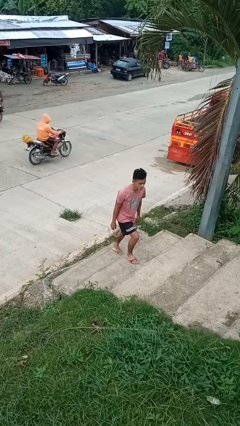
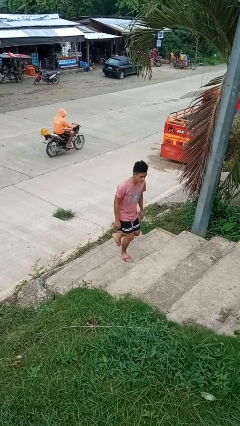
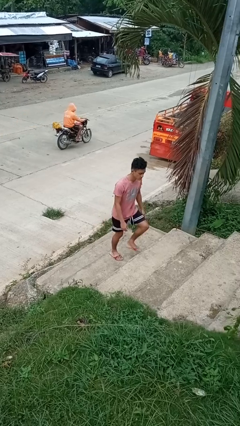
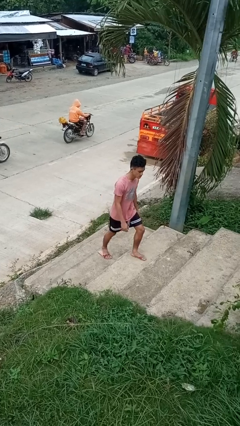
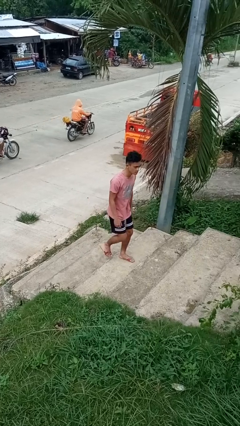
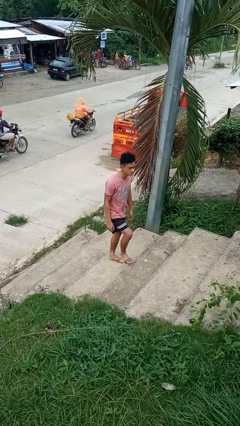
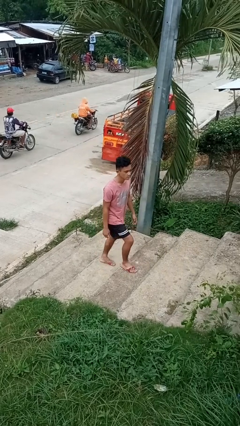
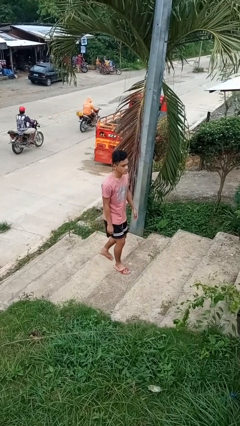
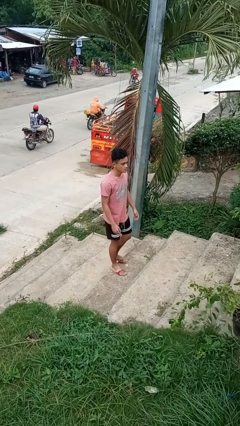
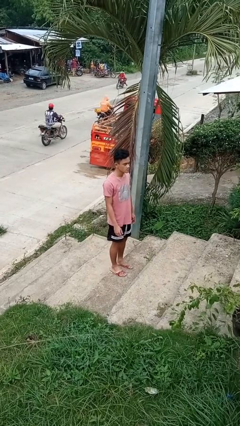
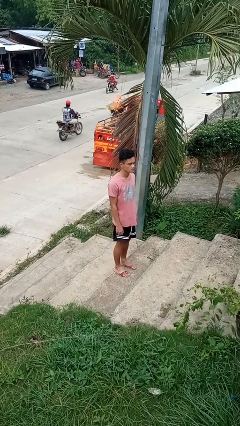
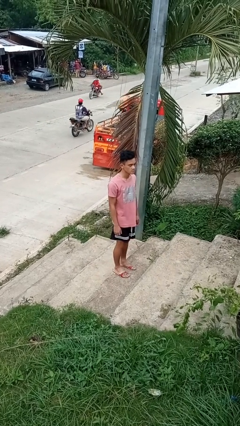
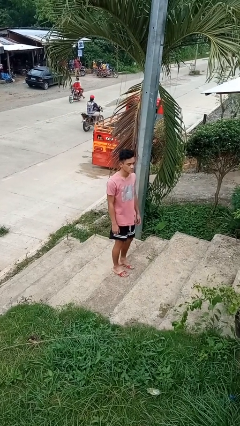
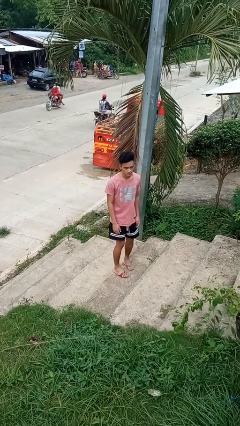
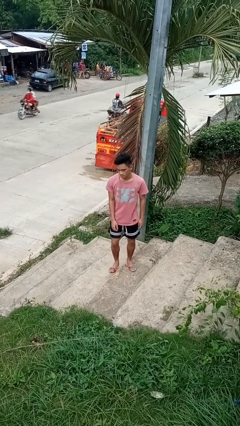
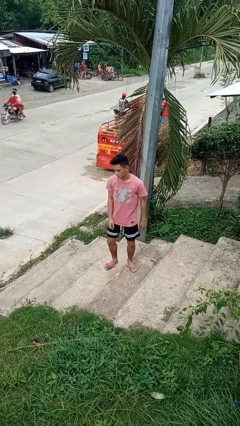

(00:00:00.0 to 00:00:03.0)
person climbs up stairs

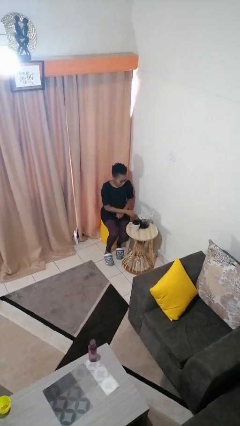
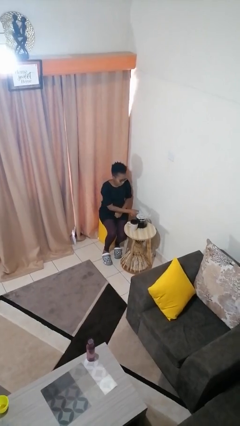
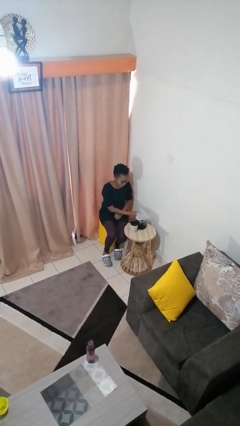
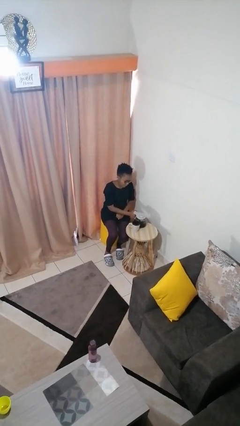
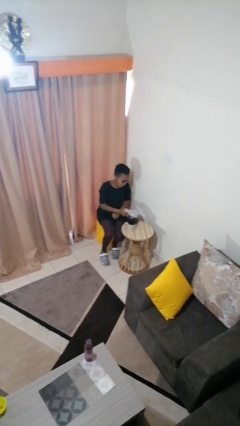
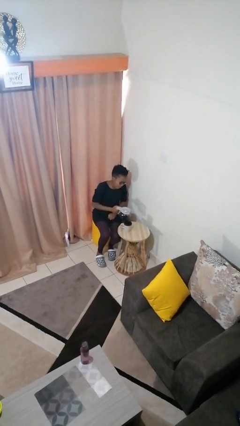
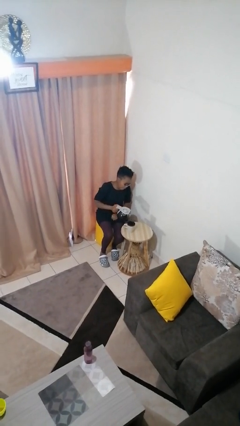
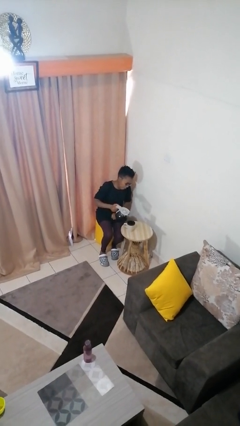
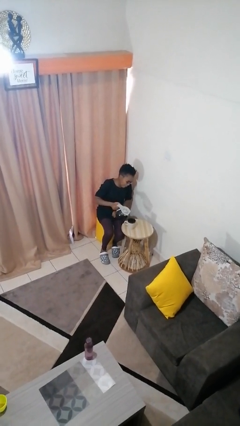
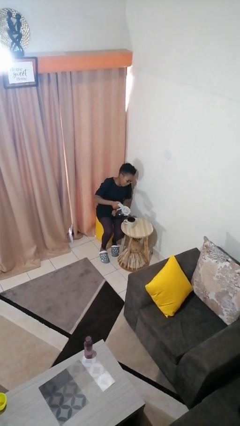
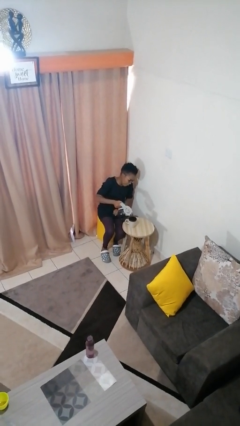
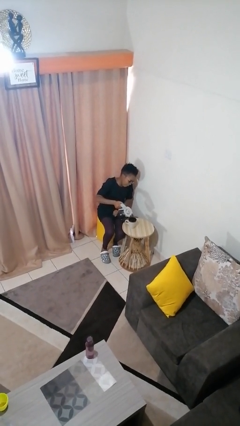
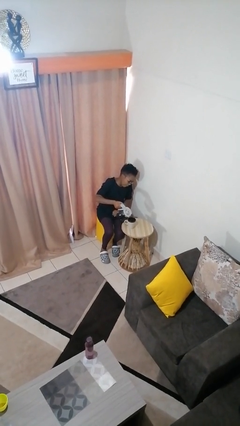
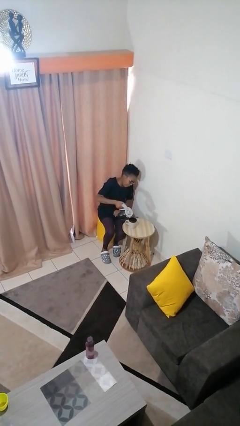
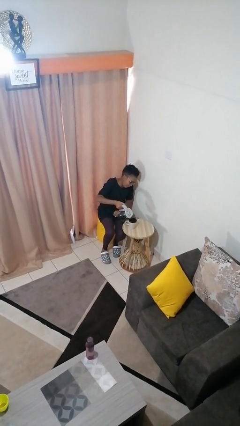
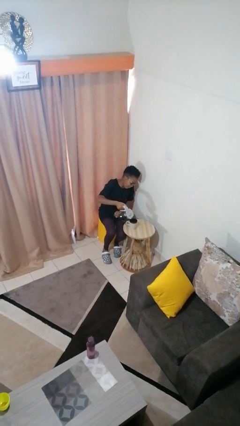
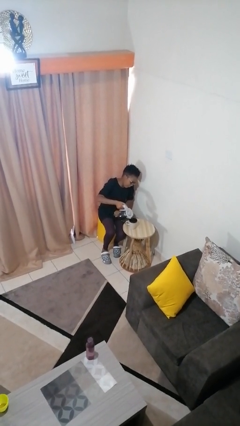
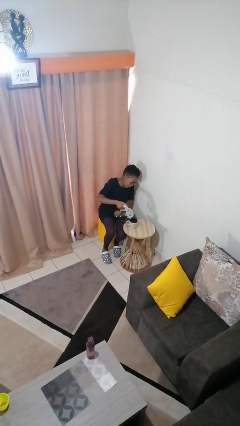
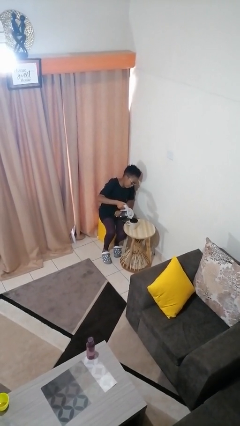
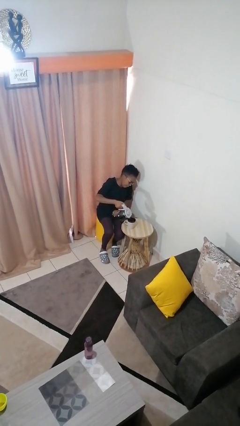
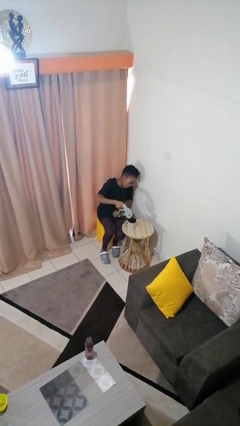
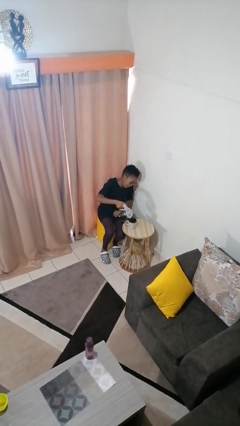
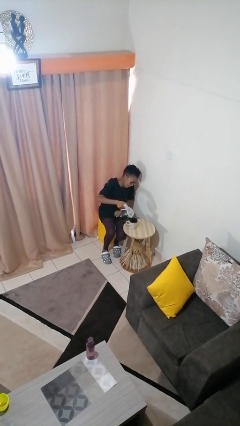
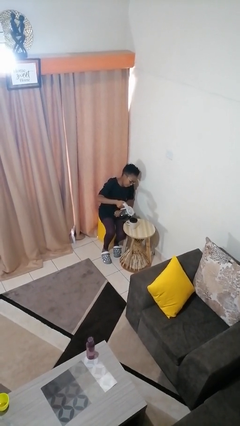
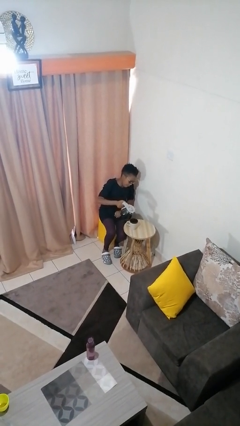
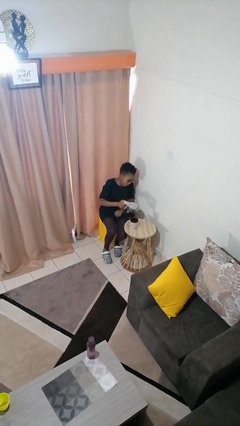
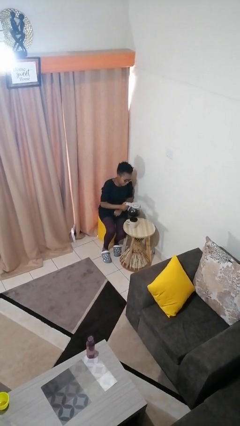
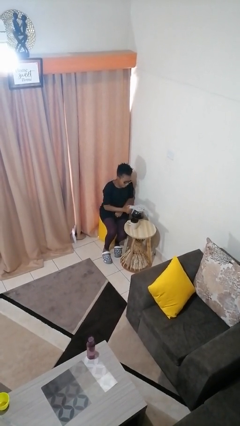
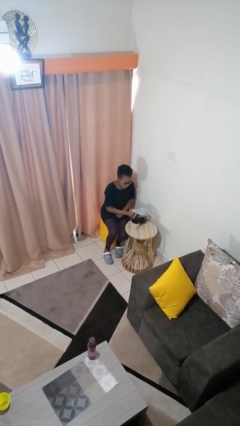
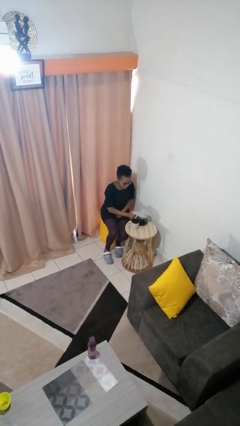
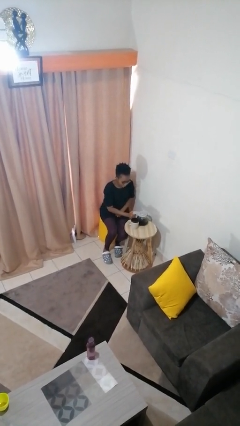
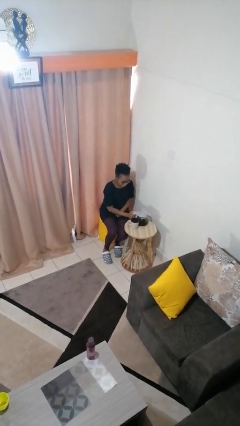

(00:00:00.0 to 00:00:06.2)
person pours coffee into mug

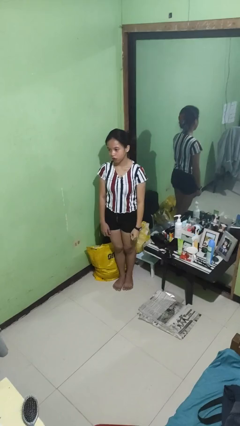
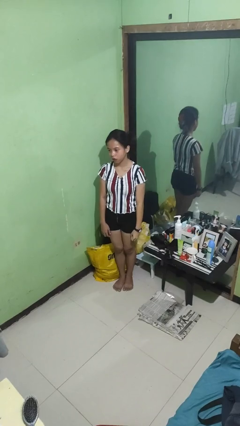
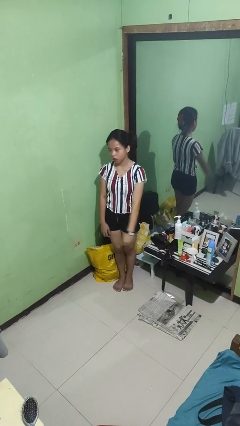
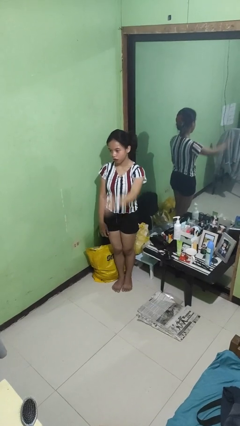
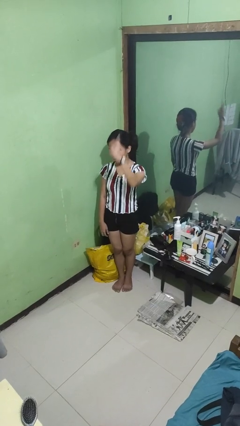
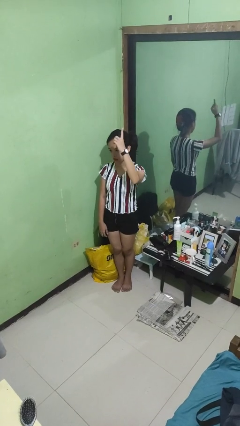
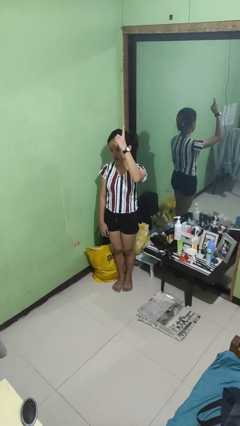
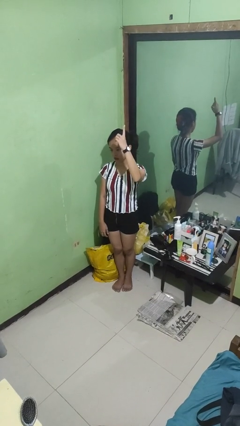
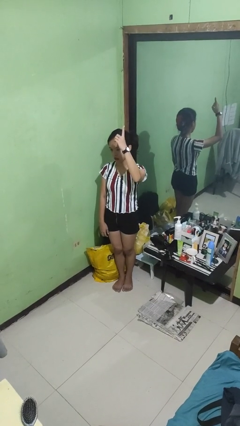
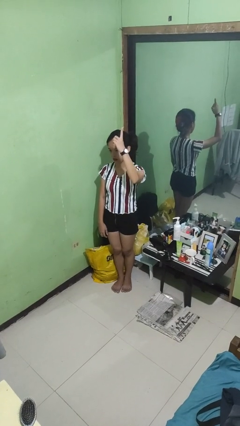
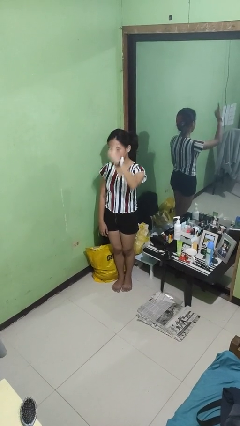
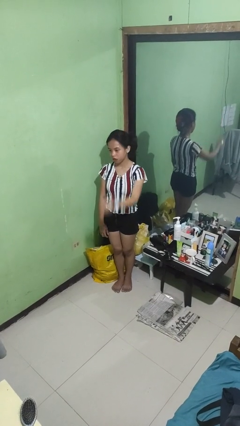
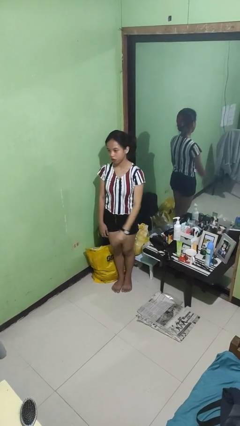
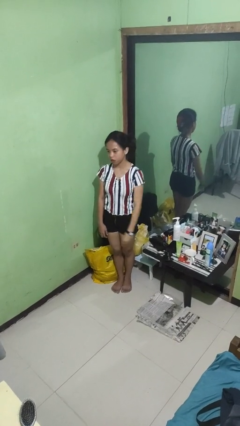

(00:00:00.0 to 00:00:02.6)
person gestures number one

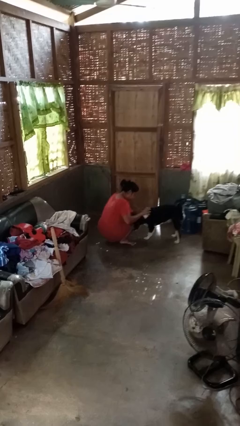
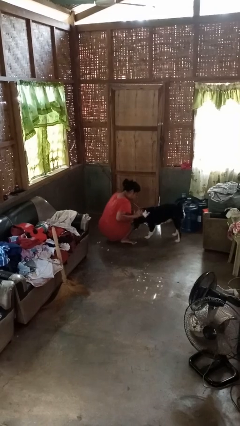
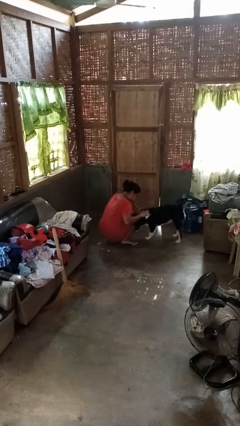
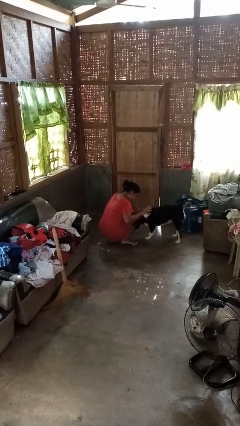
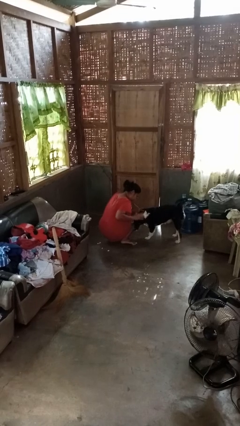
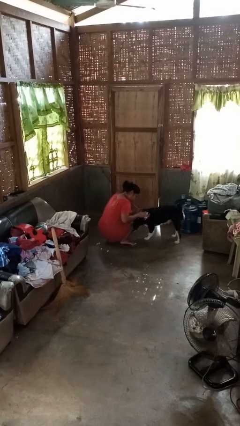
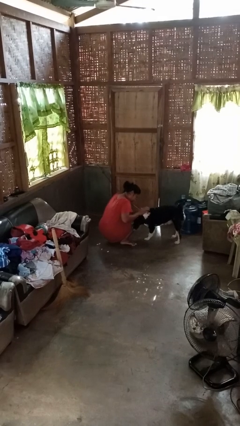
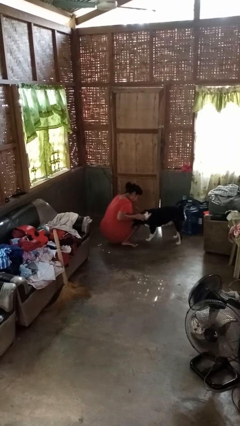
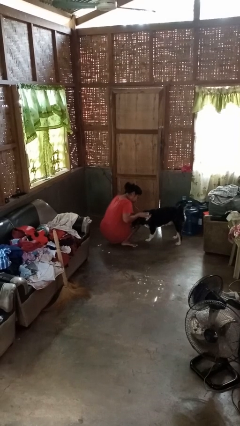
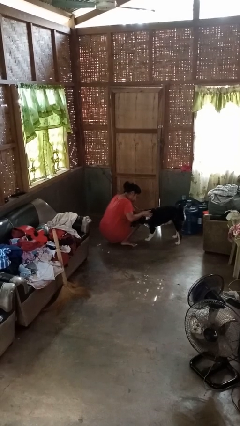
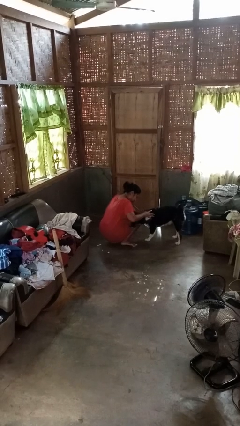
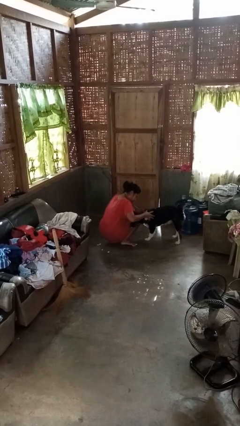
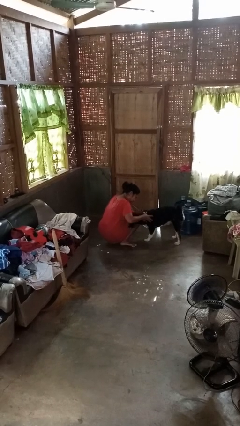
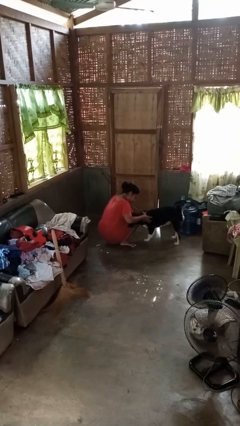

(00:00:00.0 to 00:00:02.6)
person pets dog

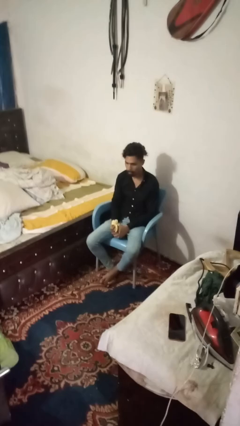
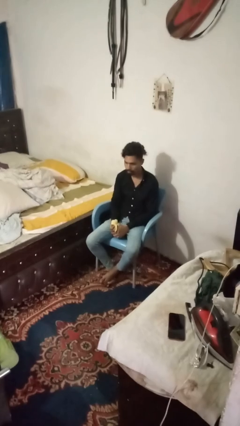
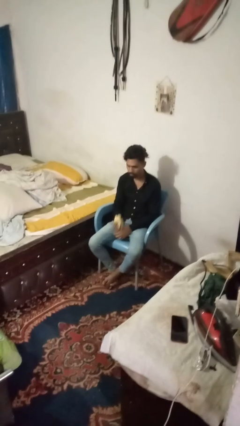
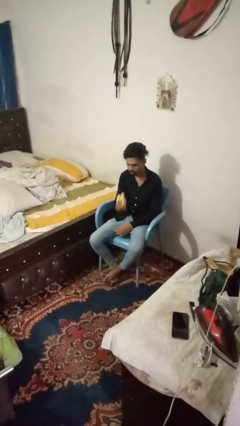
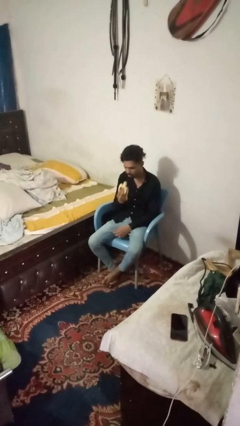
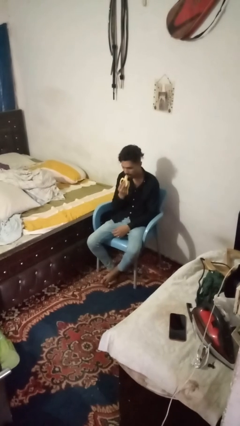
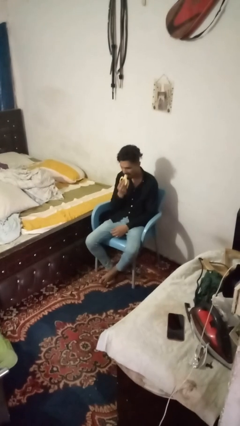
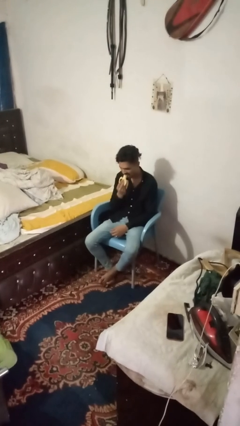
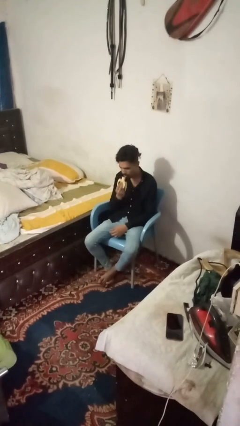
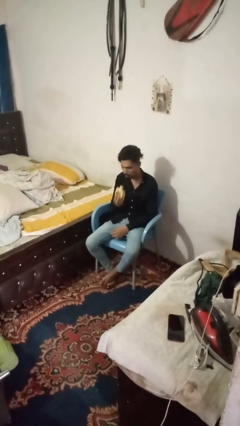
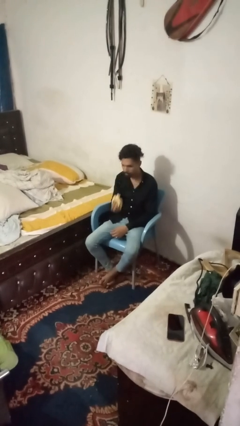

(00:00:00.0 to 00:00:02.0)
person eats banana

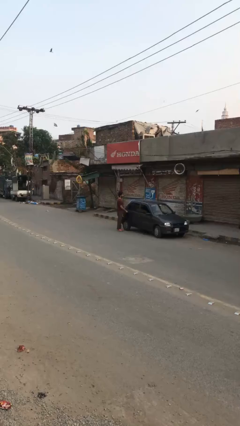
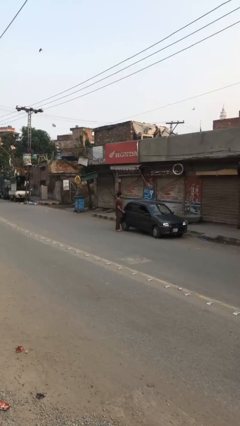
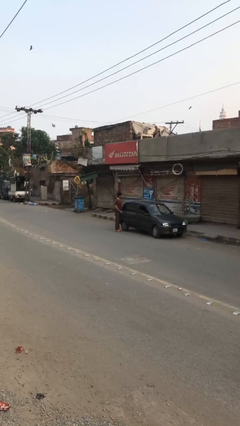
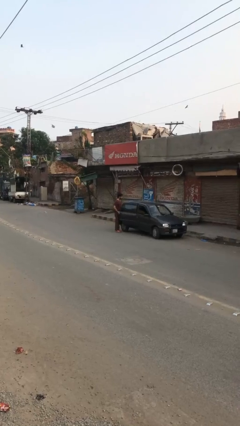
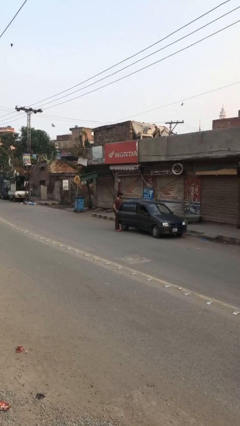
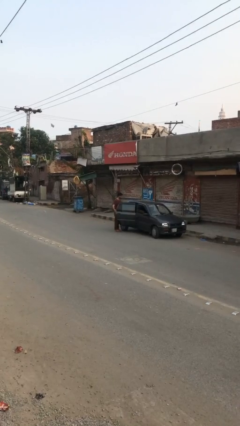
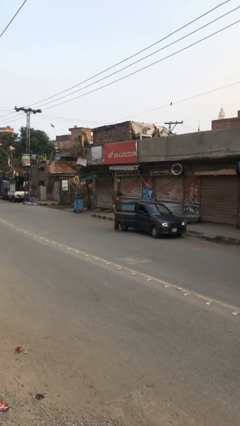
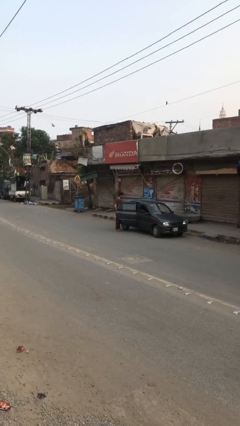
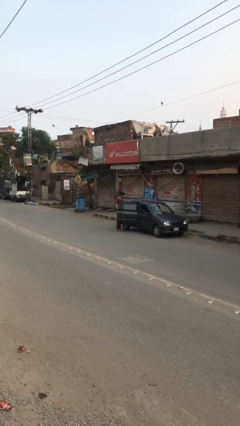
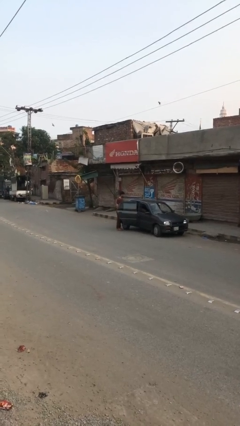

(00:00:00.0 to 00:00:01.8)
person opens car door
